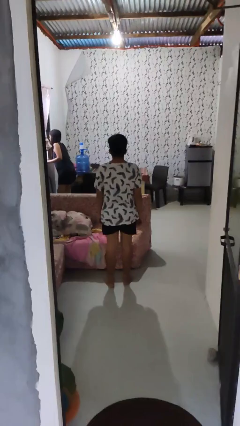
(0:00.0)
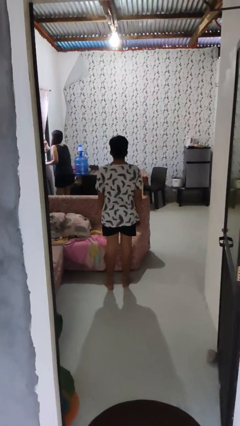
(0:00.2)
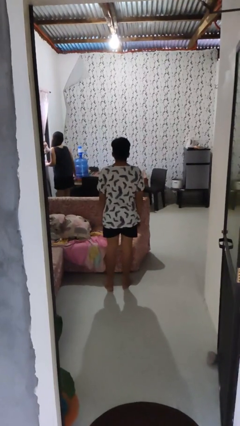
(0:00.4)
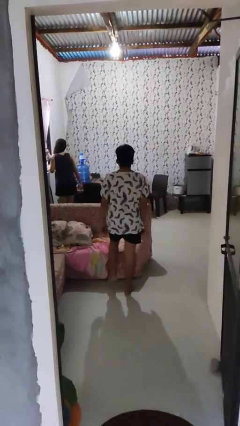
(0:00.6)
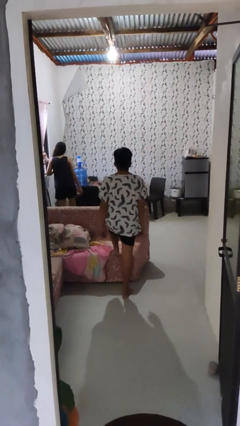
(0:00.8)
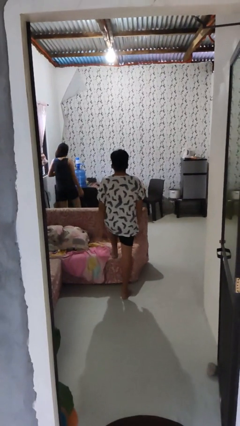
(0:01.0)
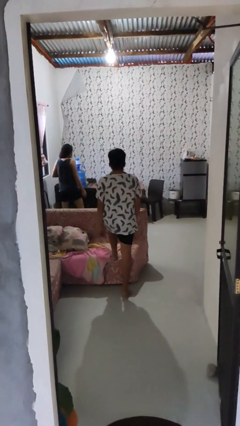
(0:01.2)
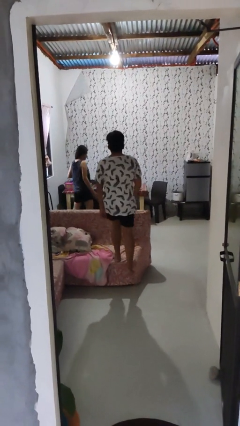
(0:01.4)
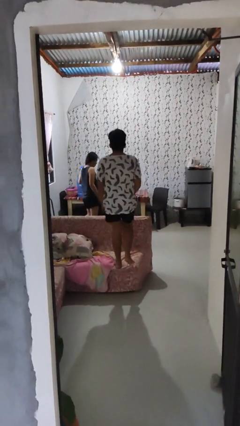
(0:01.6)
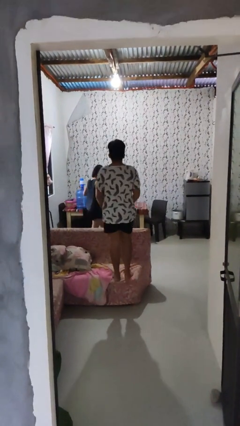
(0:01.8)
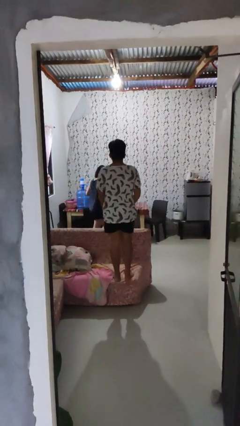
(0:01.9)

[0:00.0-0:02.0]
person climbs on couch

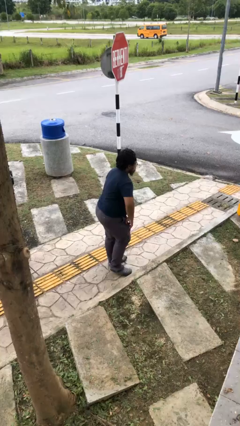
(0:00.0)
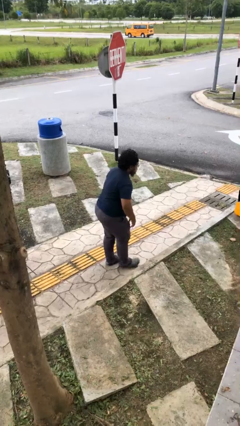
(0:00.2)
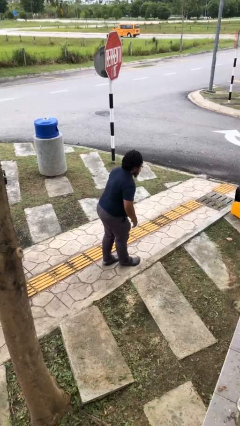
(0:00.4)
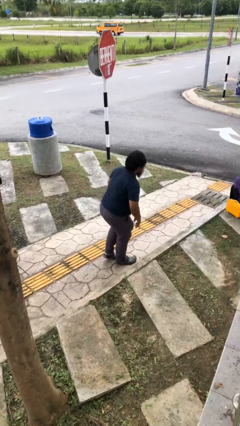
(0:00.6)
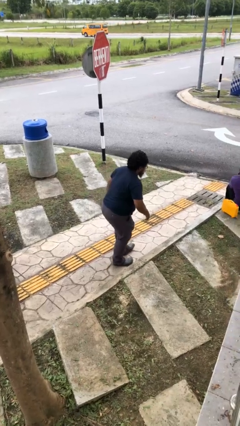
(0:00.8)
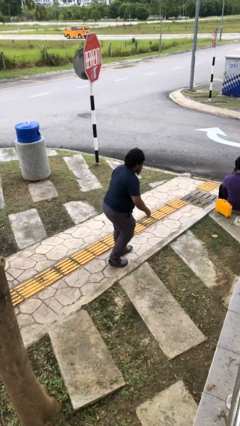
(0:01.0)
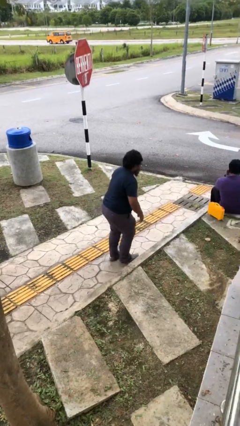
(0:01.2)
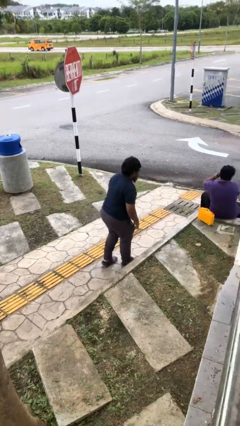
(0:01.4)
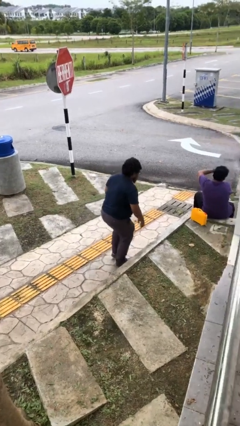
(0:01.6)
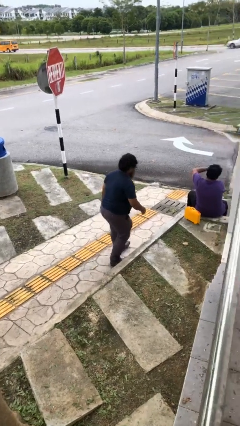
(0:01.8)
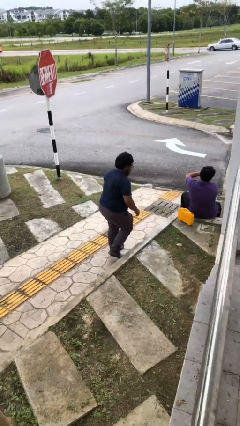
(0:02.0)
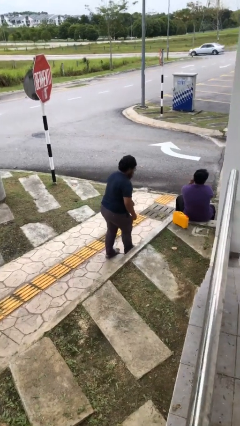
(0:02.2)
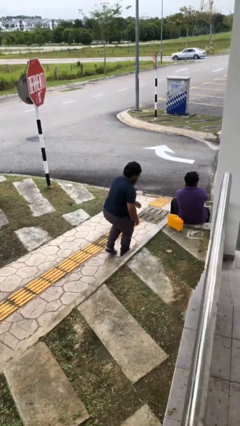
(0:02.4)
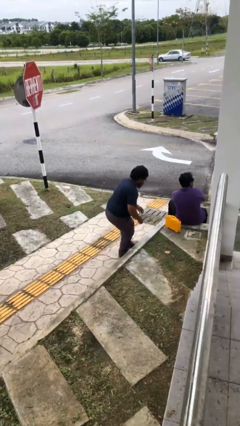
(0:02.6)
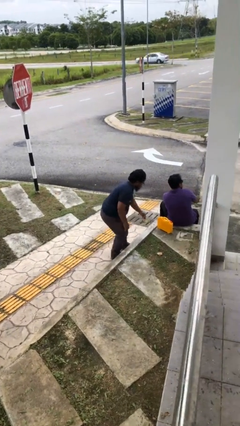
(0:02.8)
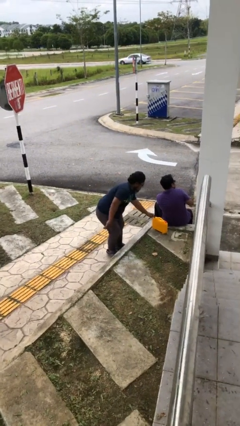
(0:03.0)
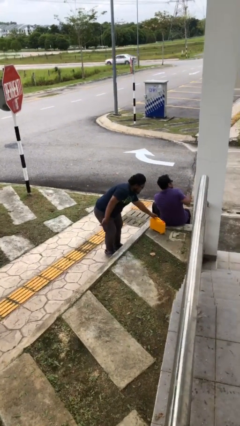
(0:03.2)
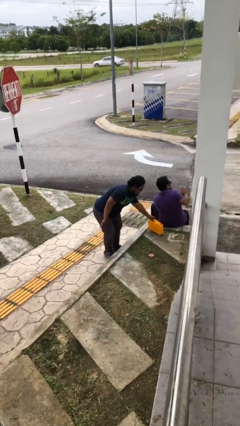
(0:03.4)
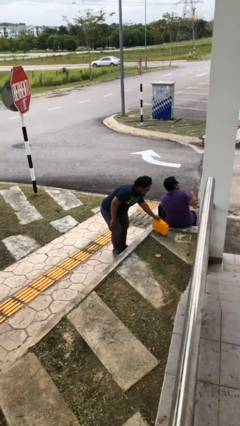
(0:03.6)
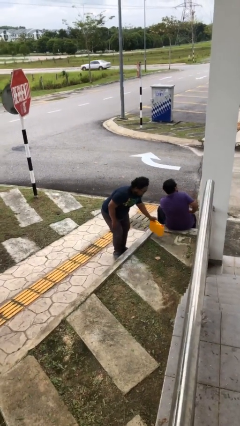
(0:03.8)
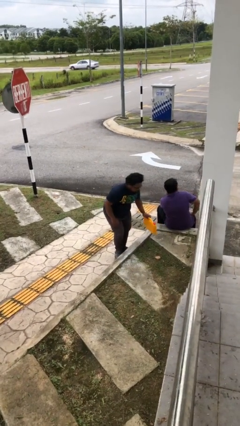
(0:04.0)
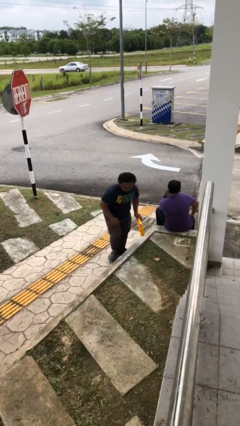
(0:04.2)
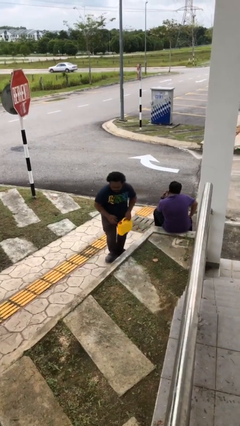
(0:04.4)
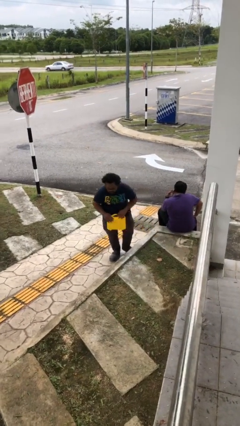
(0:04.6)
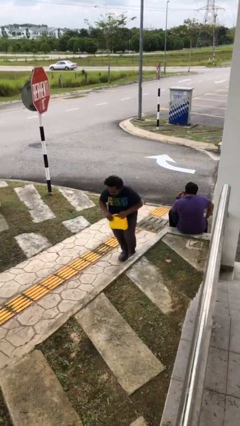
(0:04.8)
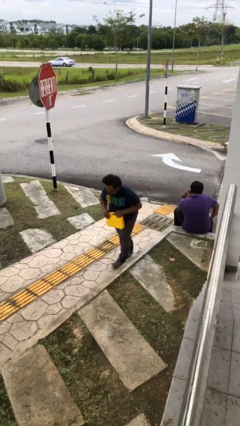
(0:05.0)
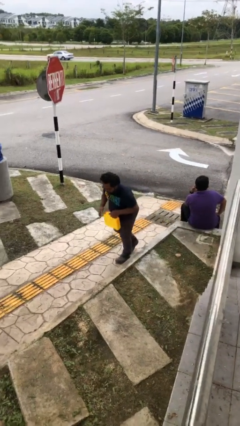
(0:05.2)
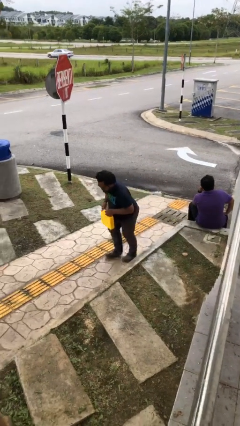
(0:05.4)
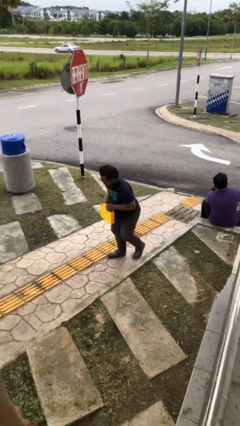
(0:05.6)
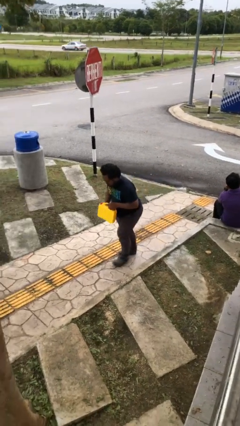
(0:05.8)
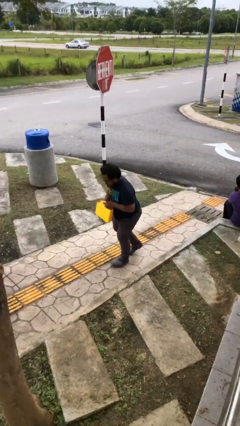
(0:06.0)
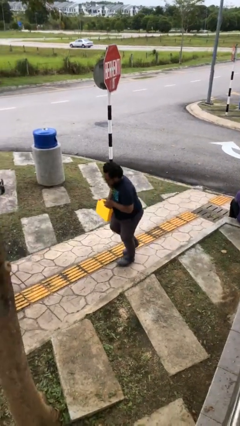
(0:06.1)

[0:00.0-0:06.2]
person steals object from person

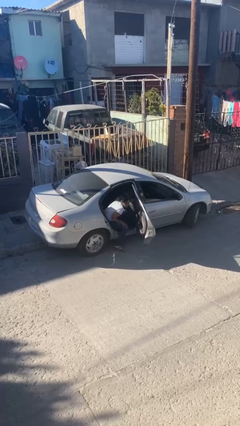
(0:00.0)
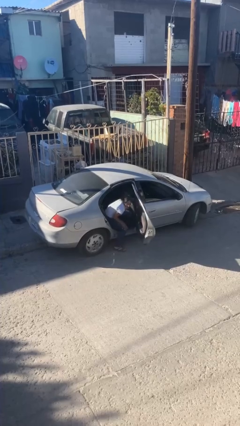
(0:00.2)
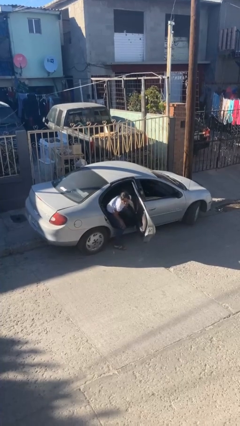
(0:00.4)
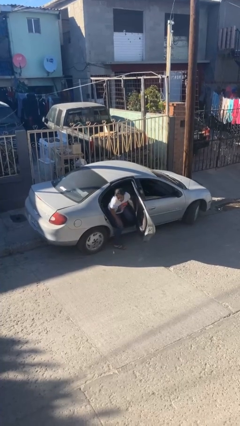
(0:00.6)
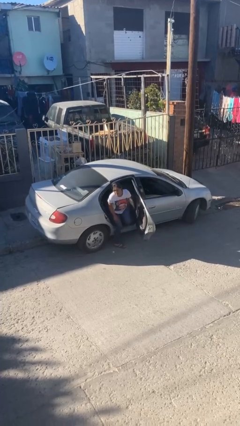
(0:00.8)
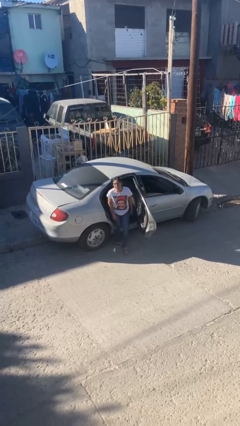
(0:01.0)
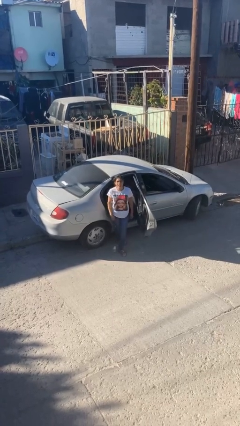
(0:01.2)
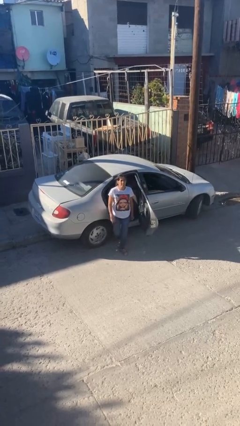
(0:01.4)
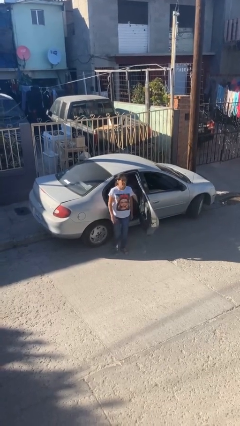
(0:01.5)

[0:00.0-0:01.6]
person exits car

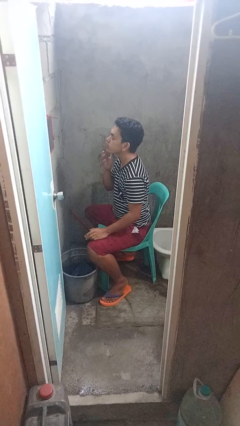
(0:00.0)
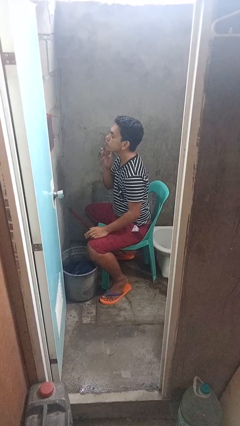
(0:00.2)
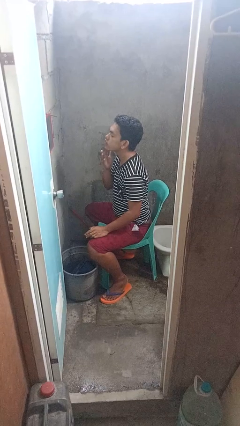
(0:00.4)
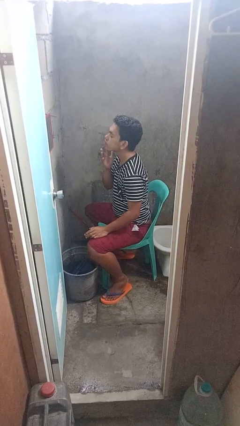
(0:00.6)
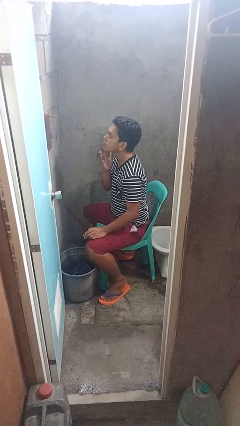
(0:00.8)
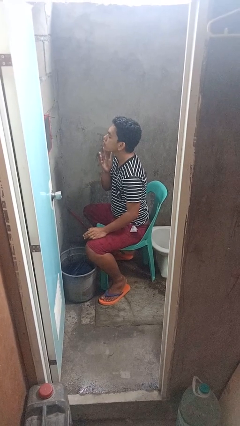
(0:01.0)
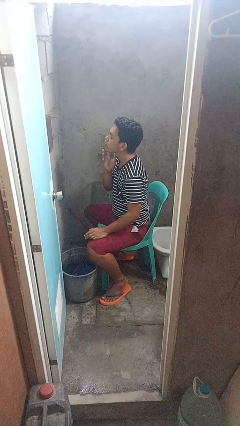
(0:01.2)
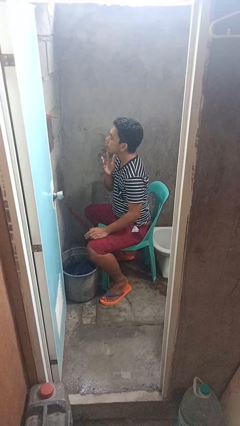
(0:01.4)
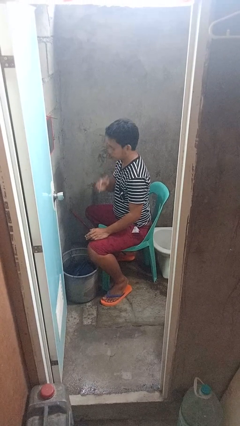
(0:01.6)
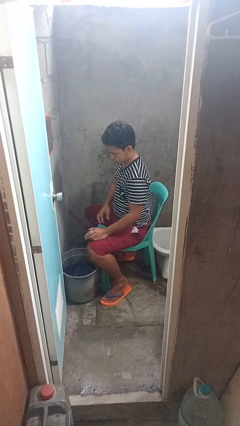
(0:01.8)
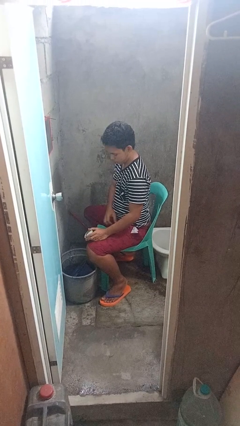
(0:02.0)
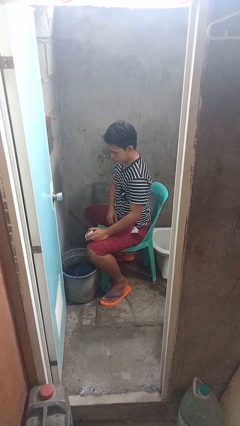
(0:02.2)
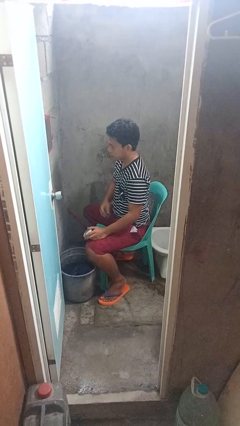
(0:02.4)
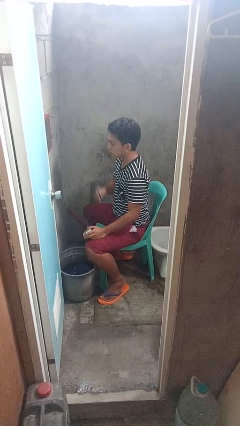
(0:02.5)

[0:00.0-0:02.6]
person applies shaving cream

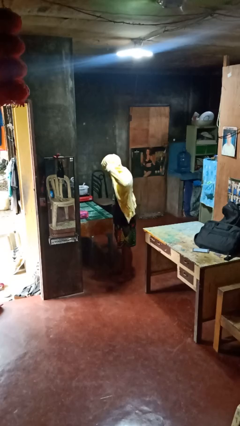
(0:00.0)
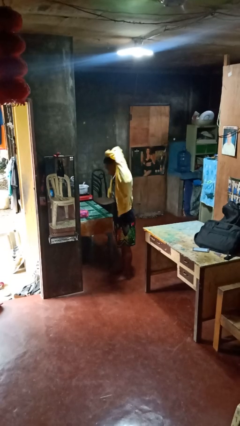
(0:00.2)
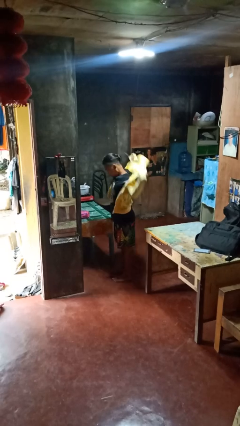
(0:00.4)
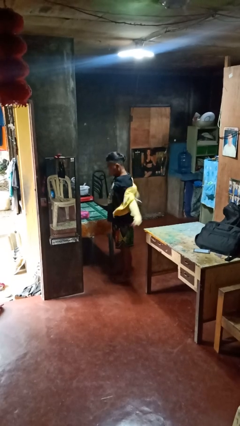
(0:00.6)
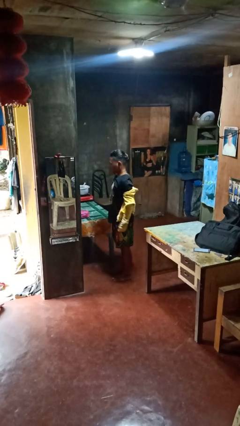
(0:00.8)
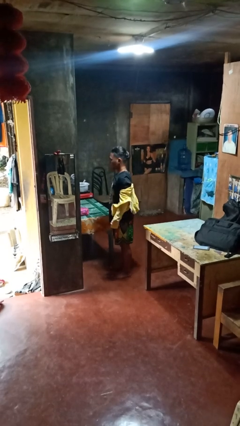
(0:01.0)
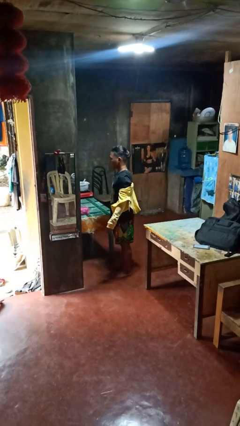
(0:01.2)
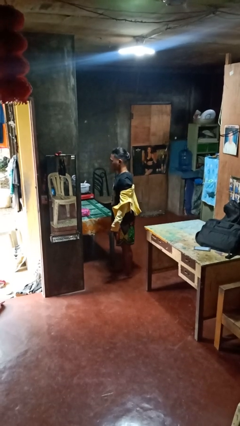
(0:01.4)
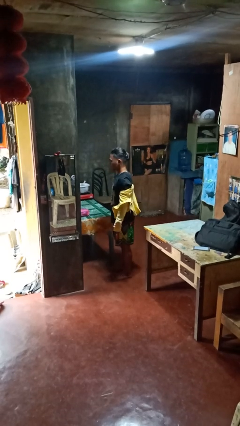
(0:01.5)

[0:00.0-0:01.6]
person takes off hoodie

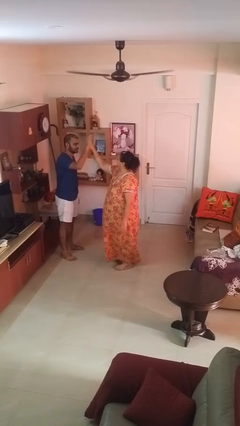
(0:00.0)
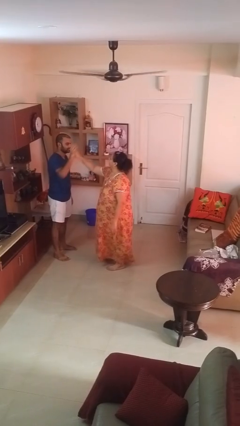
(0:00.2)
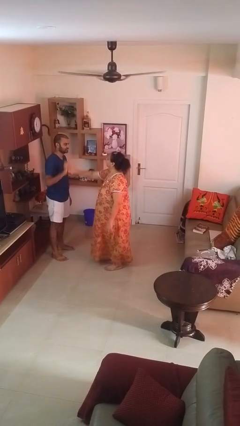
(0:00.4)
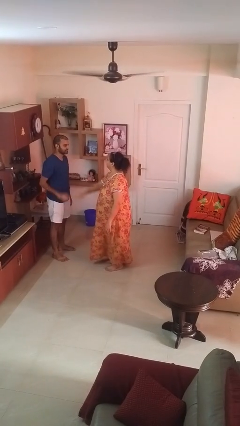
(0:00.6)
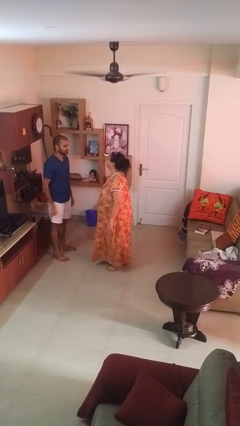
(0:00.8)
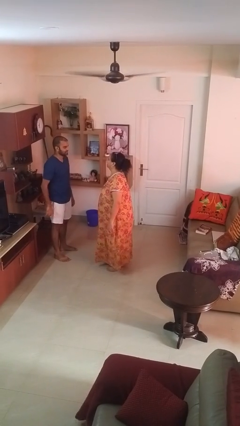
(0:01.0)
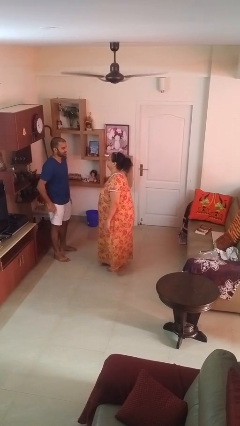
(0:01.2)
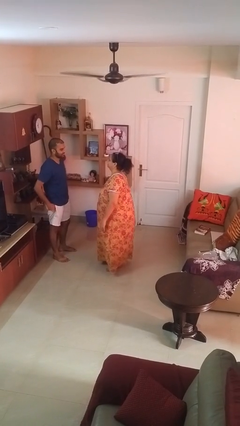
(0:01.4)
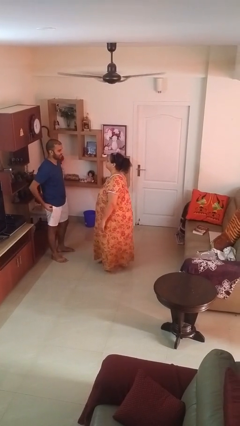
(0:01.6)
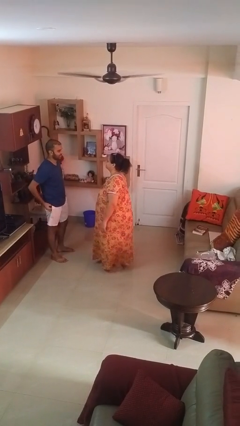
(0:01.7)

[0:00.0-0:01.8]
person highfives hand

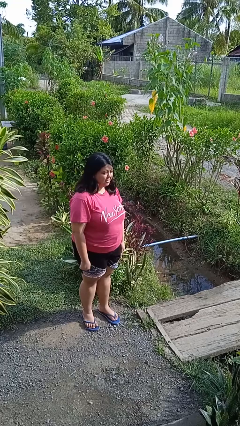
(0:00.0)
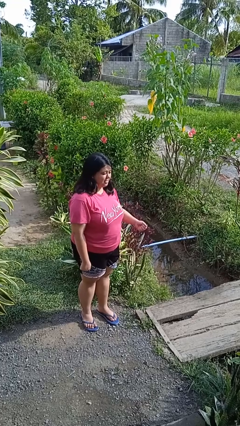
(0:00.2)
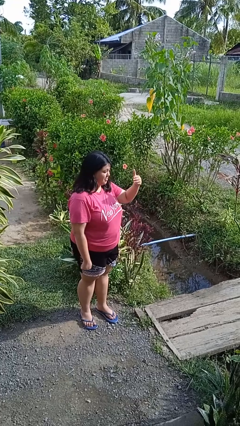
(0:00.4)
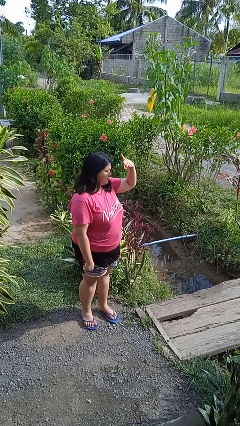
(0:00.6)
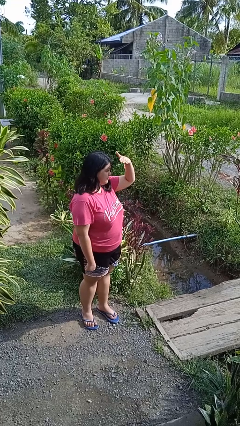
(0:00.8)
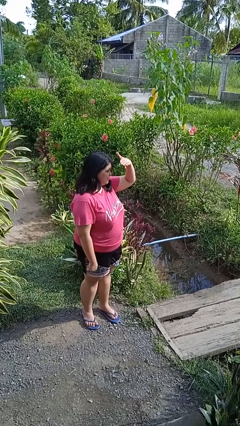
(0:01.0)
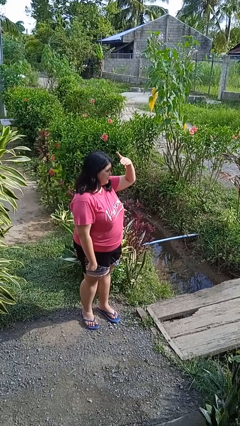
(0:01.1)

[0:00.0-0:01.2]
person shades eyes
